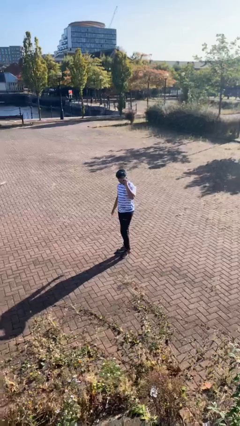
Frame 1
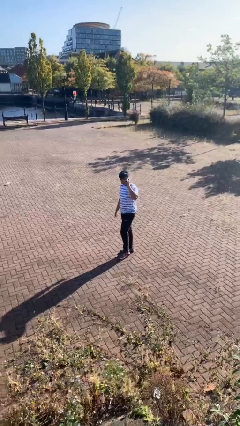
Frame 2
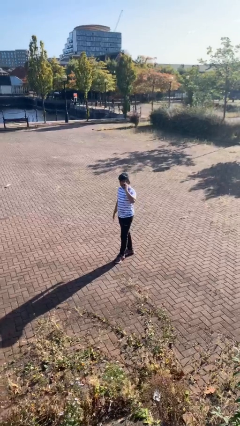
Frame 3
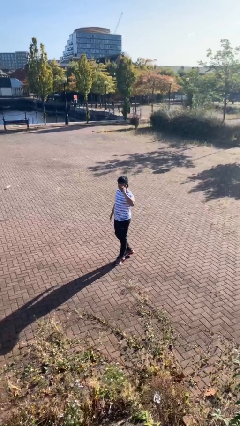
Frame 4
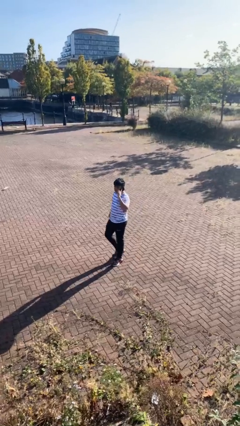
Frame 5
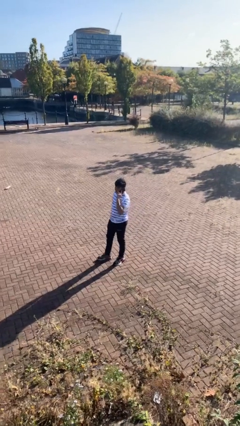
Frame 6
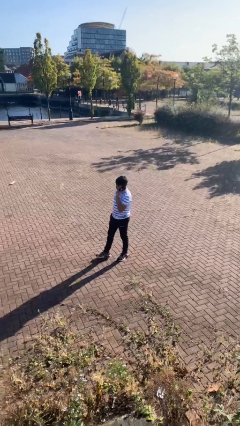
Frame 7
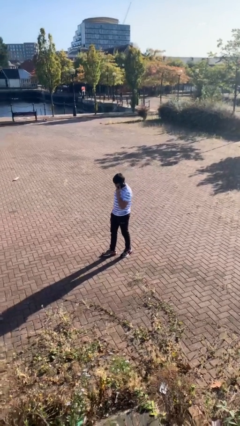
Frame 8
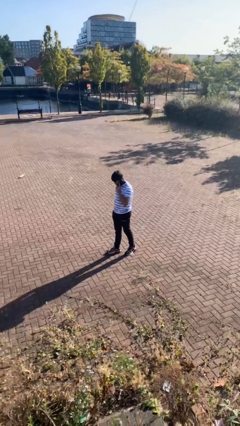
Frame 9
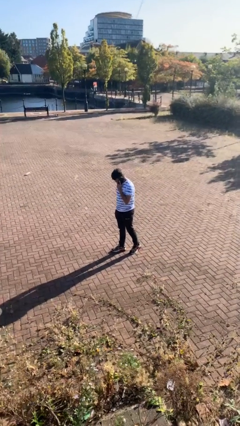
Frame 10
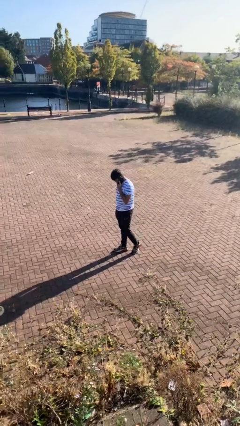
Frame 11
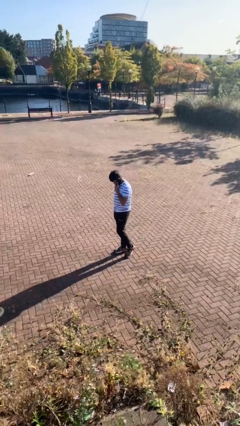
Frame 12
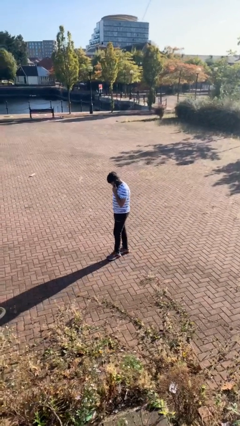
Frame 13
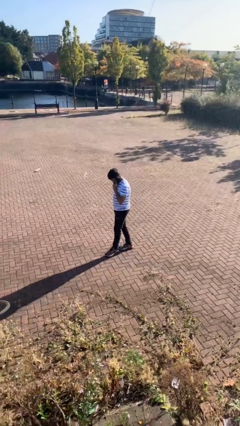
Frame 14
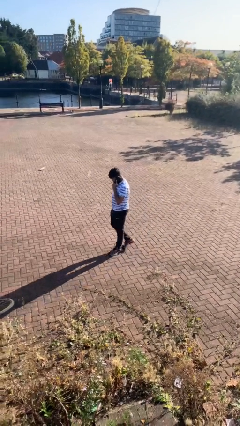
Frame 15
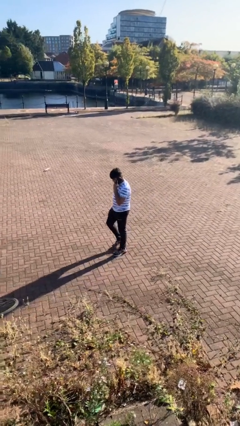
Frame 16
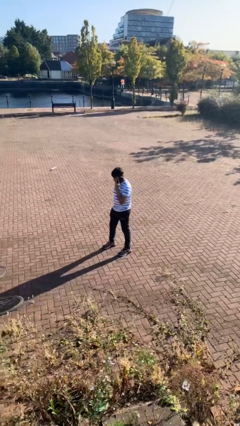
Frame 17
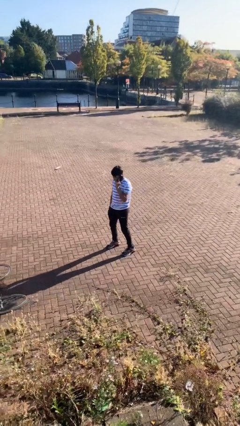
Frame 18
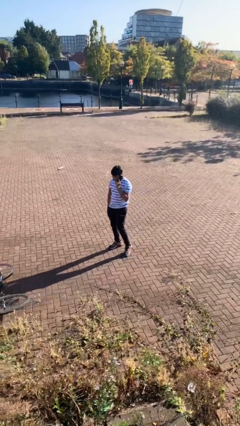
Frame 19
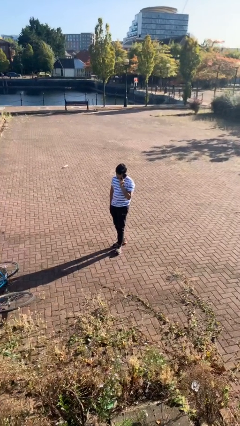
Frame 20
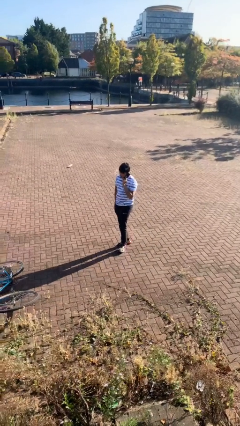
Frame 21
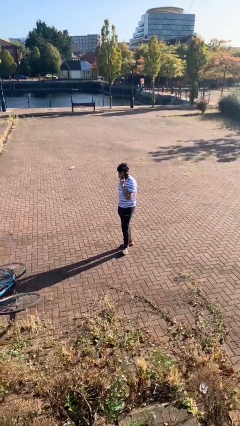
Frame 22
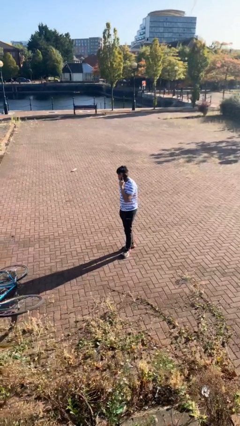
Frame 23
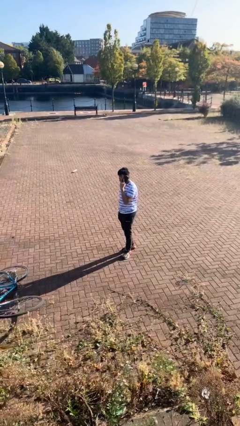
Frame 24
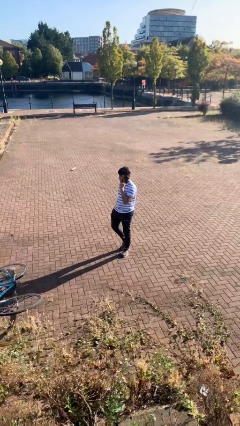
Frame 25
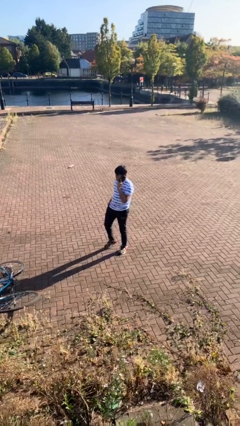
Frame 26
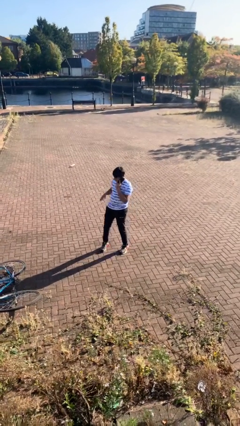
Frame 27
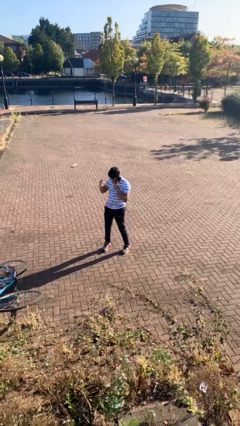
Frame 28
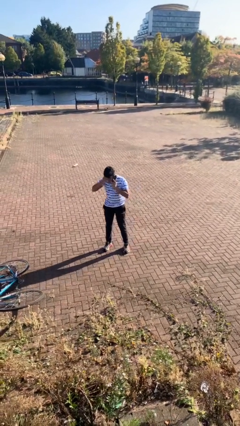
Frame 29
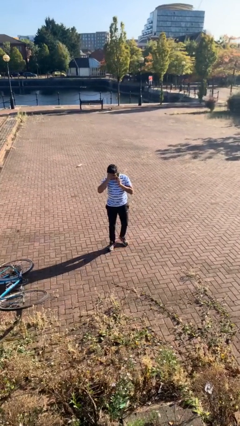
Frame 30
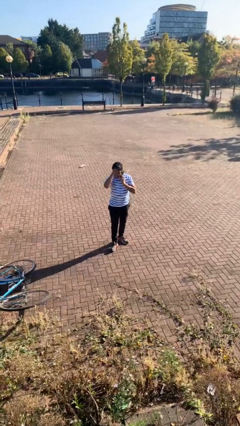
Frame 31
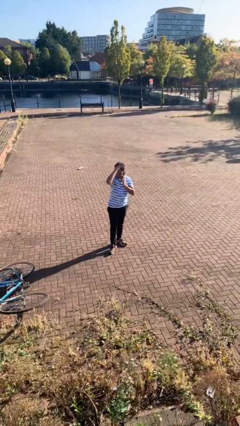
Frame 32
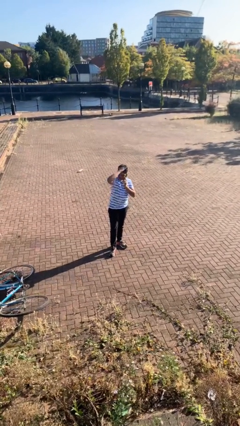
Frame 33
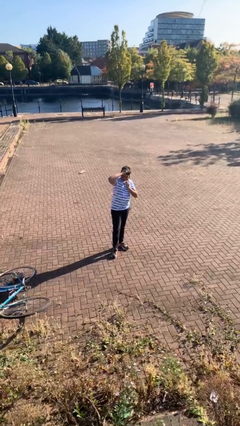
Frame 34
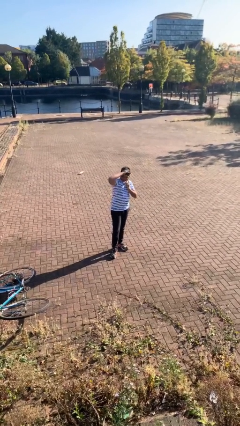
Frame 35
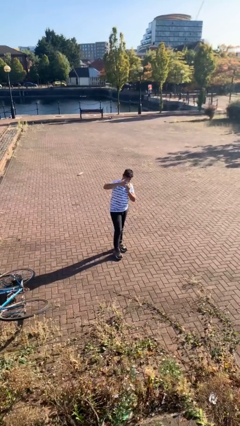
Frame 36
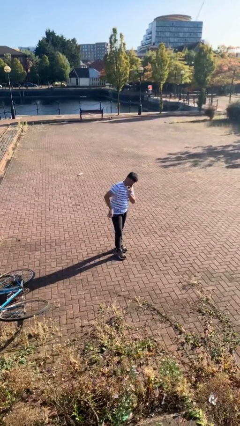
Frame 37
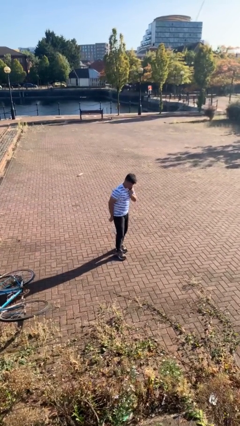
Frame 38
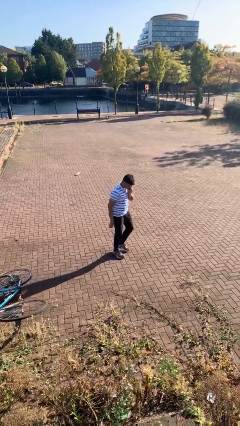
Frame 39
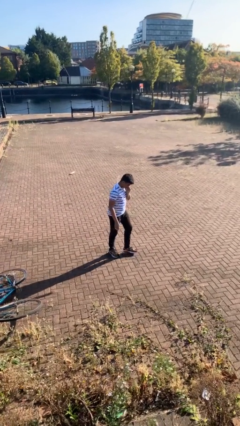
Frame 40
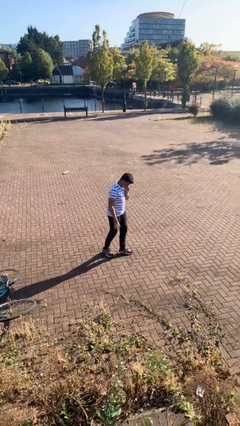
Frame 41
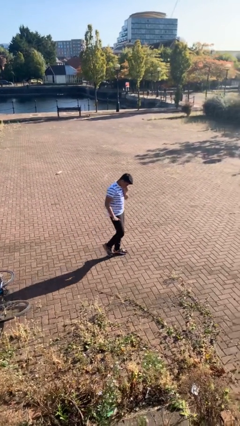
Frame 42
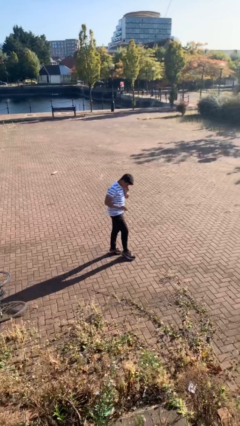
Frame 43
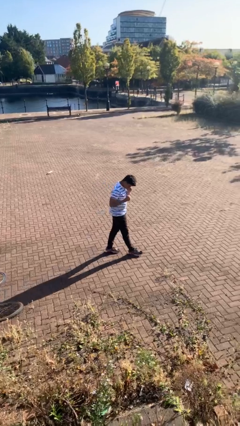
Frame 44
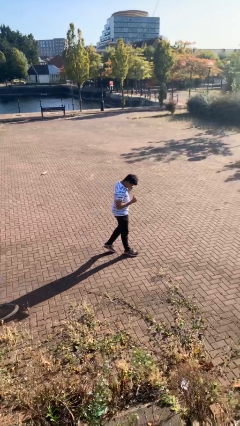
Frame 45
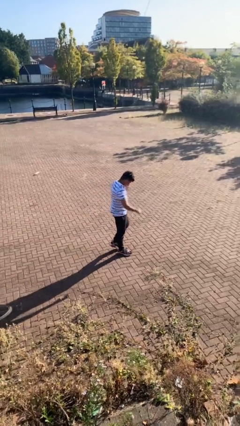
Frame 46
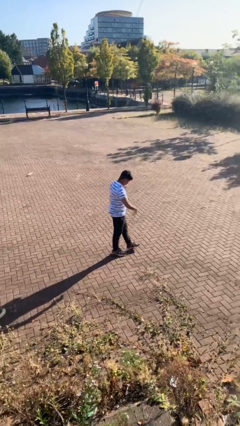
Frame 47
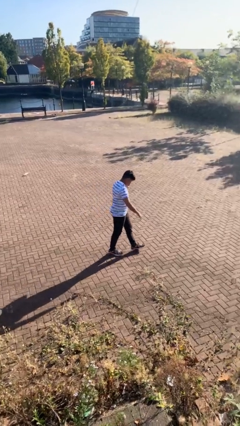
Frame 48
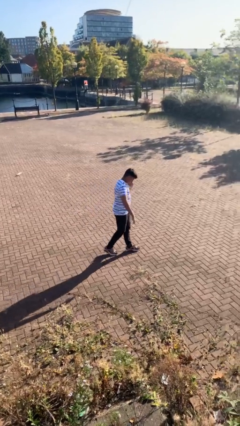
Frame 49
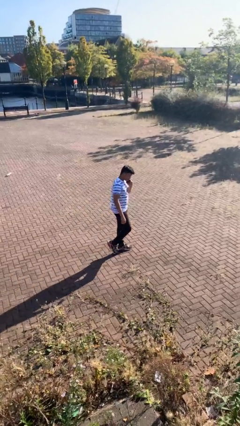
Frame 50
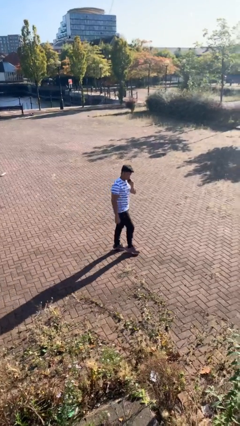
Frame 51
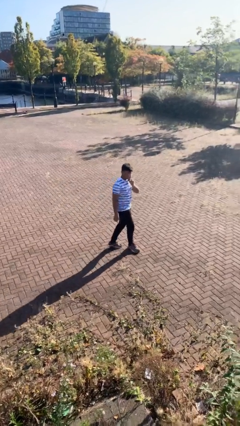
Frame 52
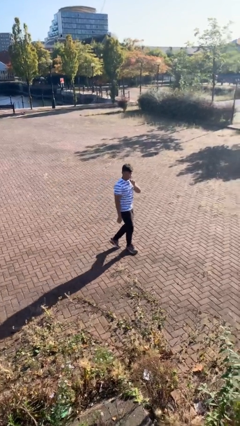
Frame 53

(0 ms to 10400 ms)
person talks on phone

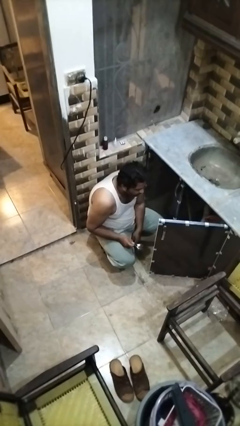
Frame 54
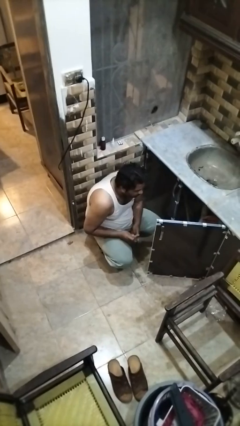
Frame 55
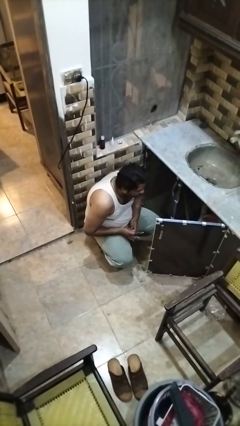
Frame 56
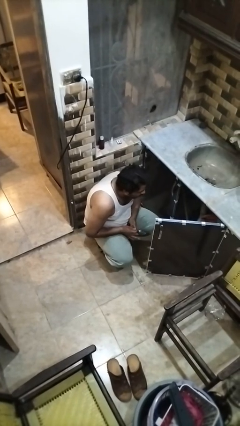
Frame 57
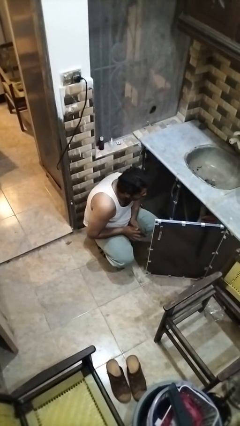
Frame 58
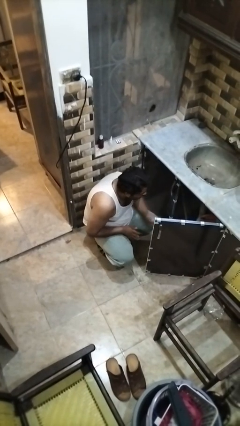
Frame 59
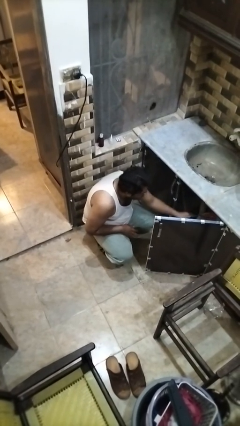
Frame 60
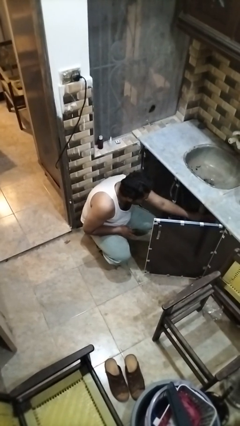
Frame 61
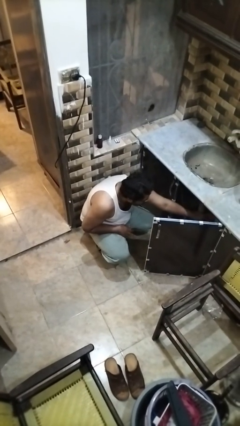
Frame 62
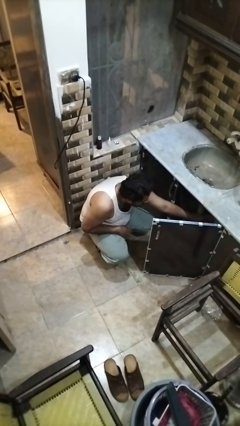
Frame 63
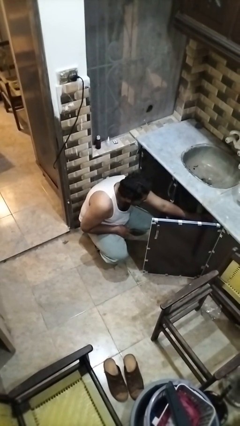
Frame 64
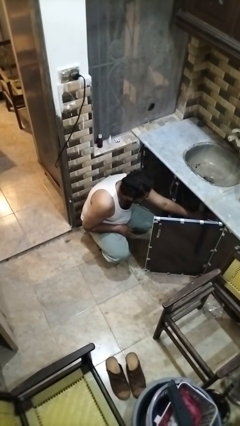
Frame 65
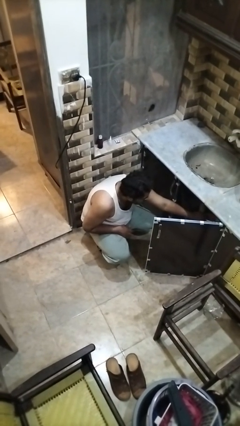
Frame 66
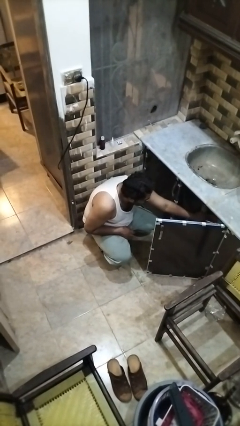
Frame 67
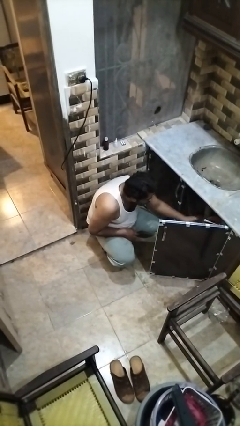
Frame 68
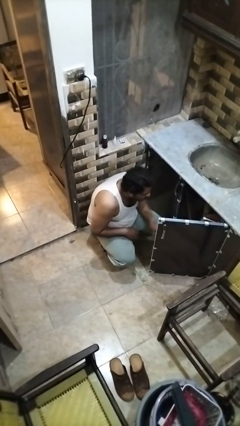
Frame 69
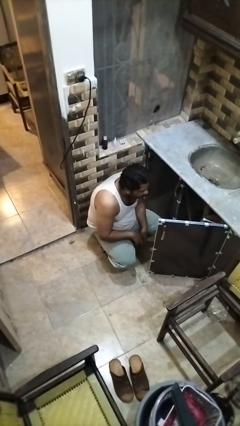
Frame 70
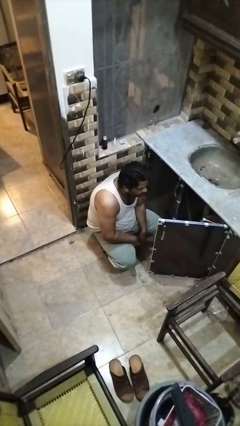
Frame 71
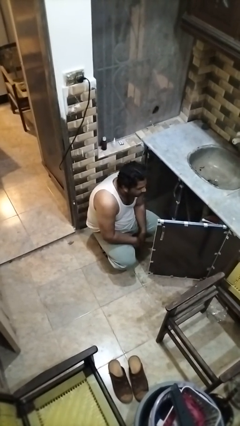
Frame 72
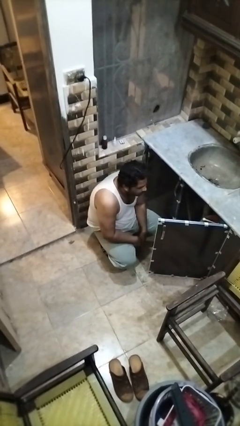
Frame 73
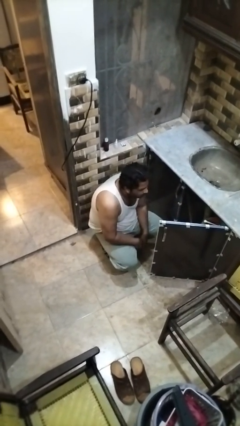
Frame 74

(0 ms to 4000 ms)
person puts object into kitchen drawer

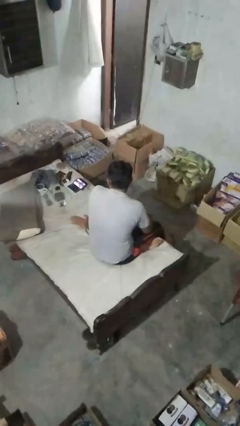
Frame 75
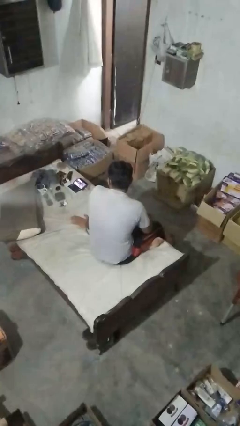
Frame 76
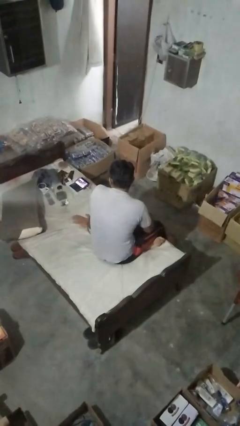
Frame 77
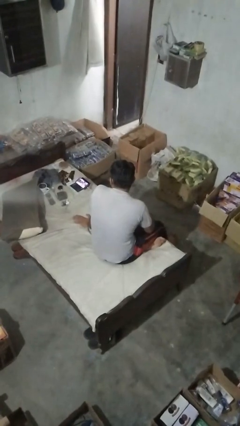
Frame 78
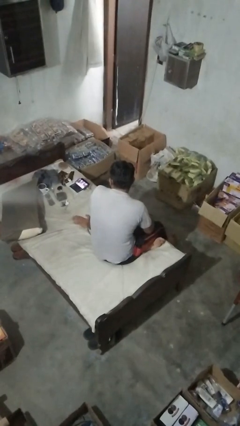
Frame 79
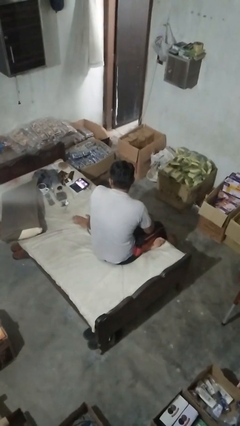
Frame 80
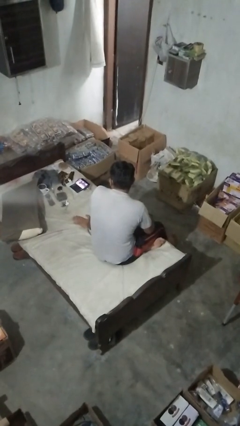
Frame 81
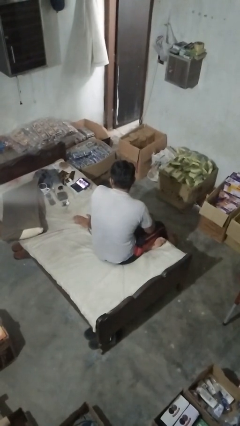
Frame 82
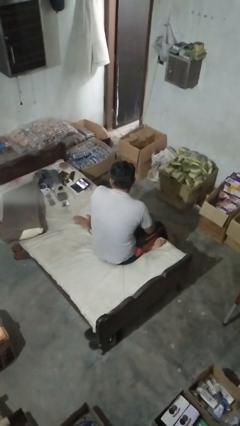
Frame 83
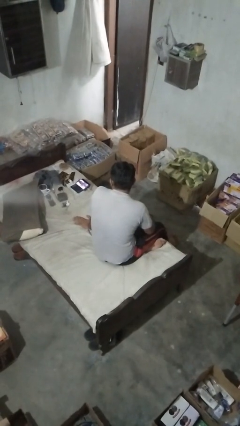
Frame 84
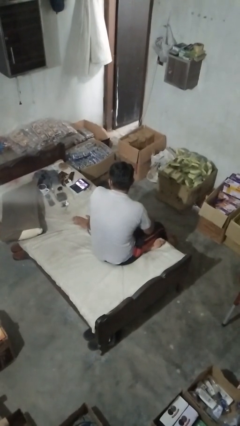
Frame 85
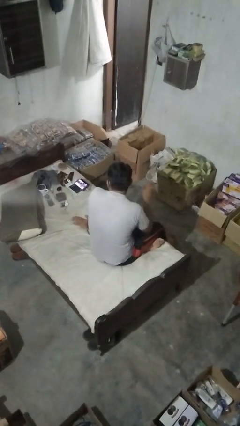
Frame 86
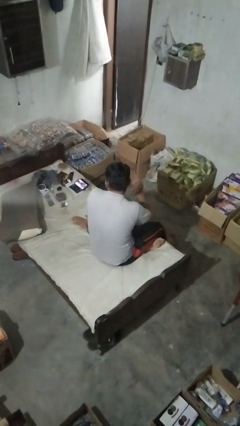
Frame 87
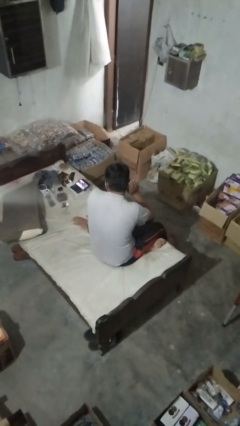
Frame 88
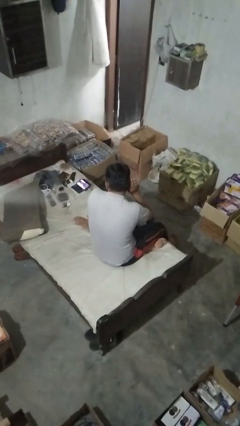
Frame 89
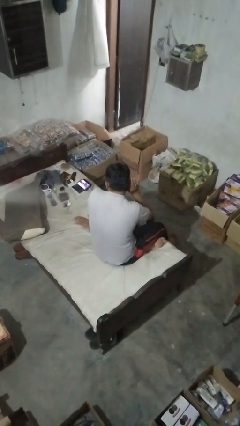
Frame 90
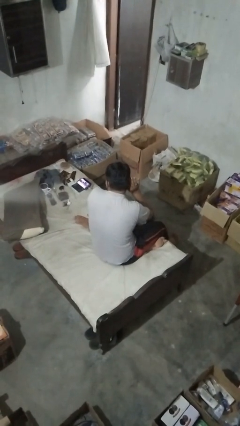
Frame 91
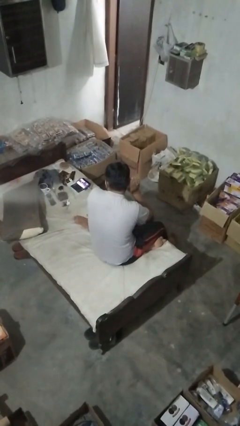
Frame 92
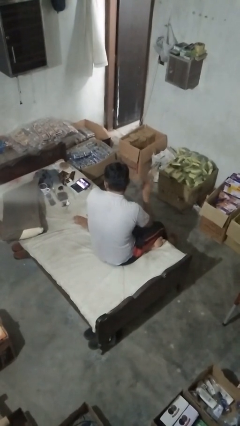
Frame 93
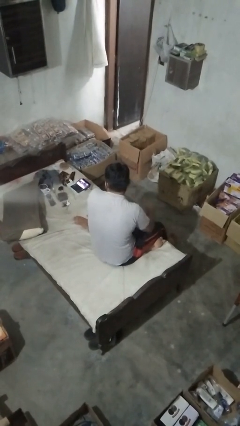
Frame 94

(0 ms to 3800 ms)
person gestures listen closely
